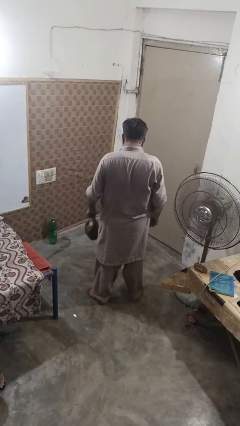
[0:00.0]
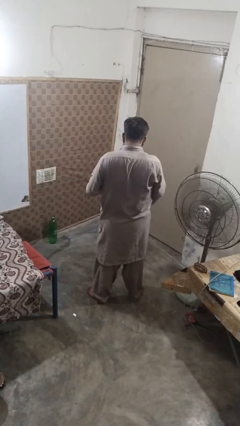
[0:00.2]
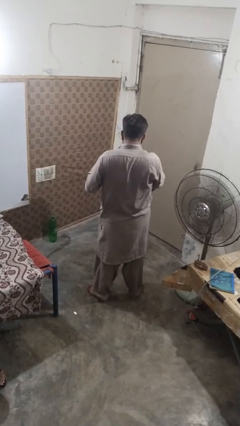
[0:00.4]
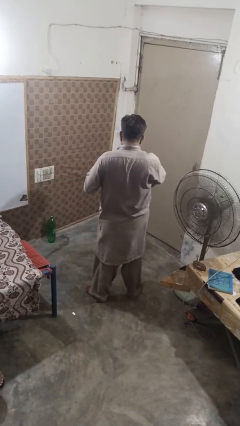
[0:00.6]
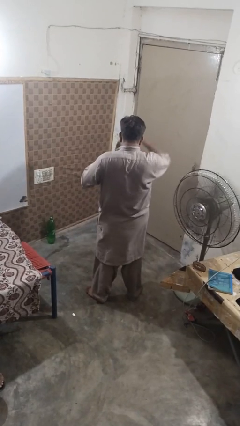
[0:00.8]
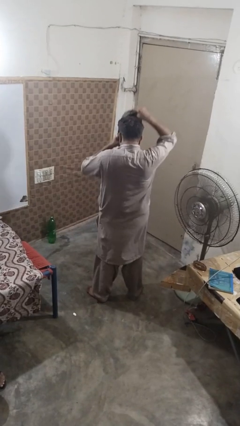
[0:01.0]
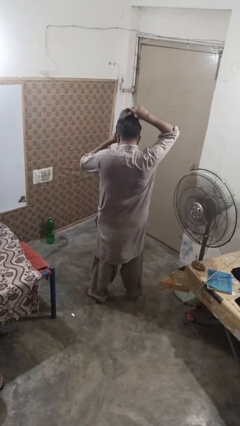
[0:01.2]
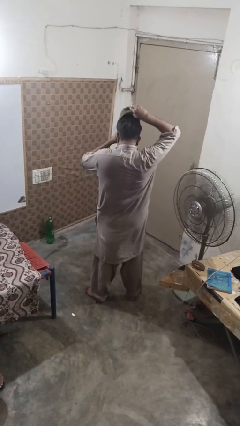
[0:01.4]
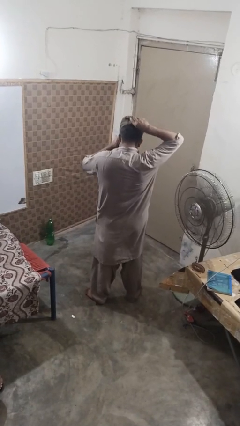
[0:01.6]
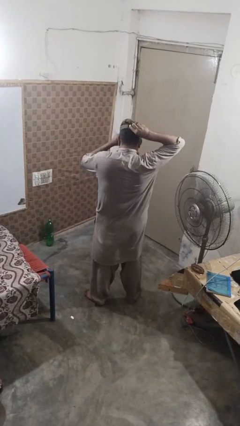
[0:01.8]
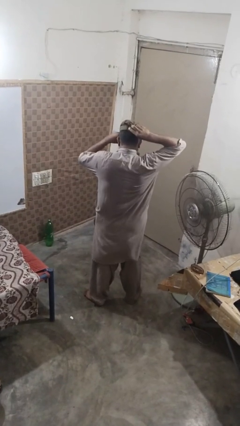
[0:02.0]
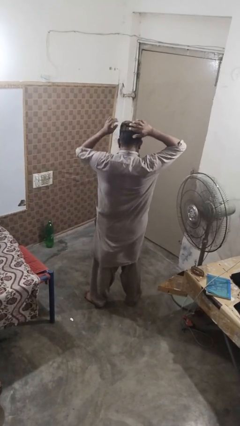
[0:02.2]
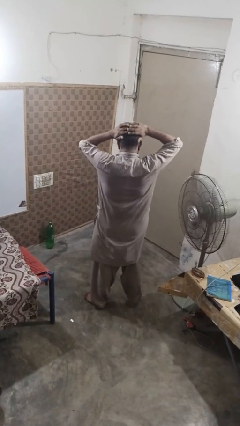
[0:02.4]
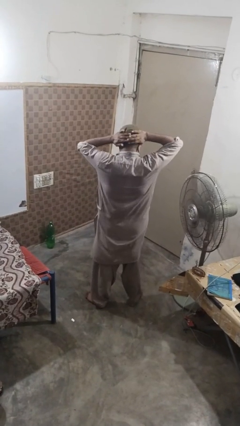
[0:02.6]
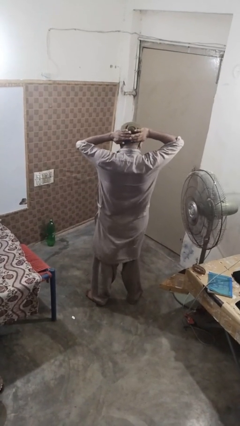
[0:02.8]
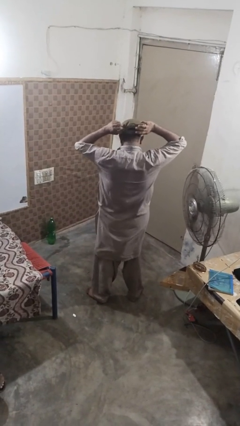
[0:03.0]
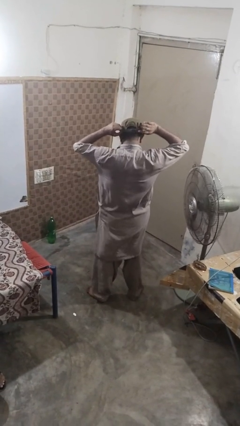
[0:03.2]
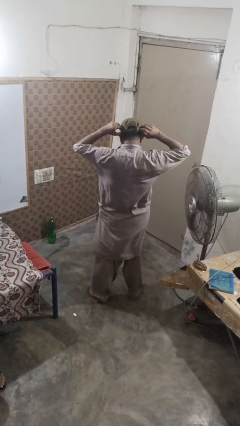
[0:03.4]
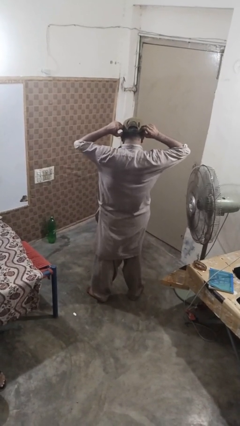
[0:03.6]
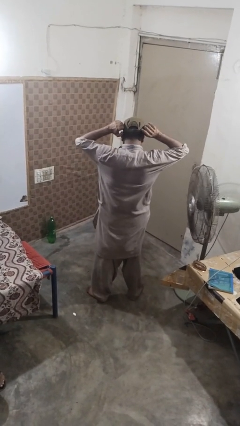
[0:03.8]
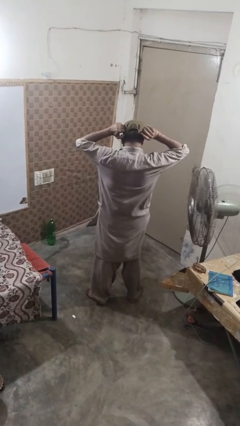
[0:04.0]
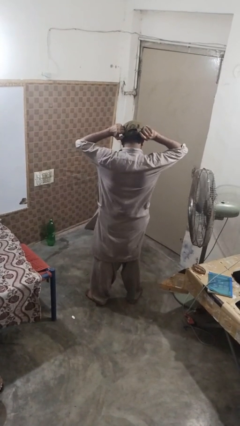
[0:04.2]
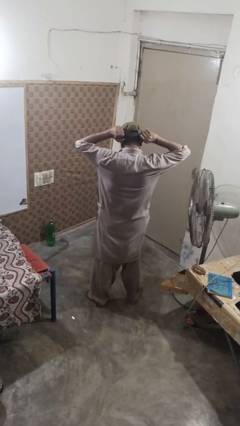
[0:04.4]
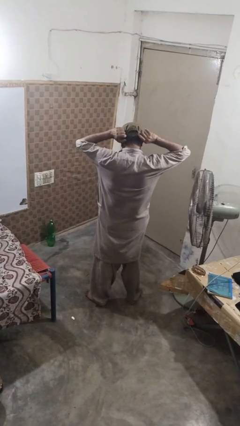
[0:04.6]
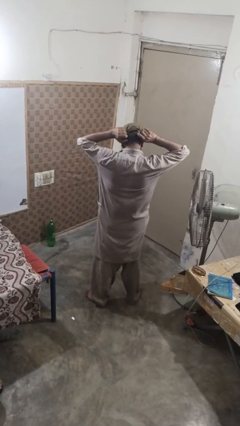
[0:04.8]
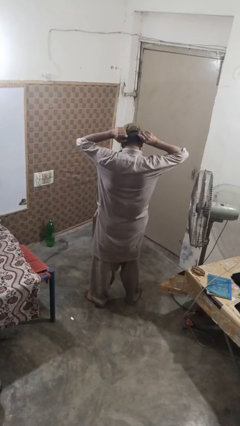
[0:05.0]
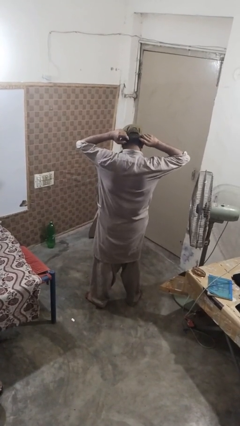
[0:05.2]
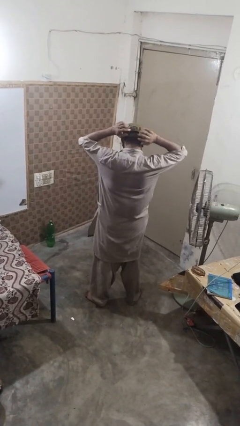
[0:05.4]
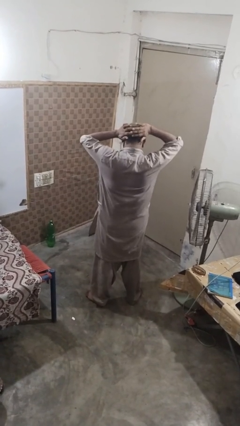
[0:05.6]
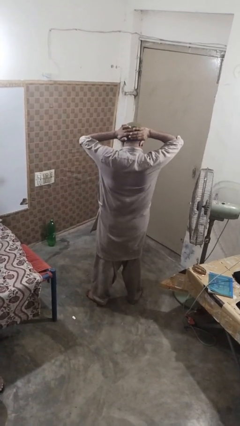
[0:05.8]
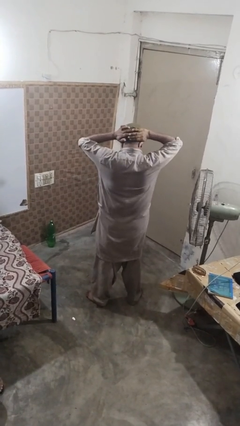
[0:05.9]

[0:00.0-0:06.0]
person puts on hat

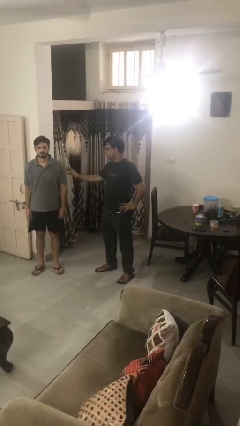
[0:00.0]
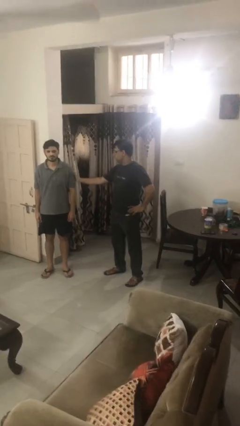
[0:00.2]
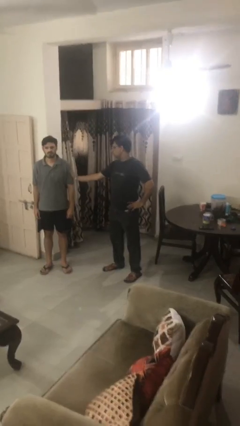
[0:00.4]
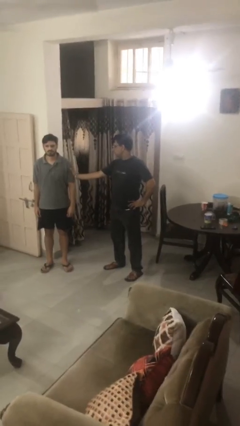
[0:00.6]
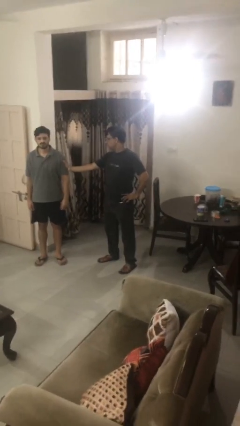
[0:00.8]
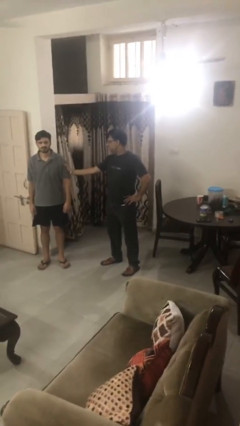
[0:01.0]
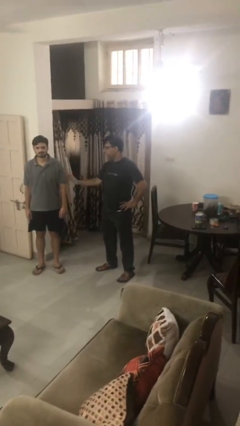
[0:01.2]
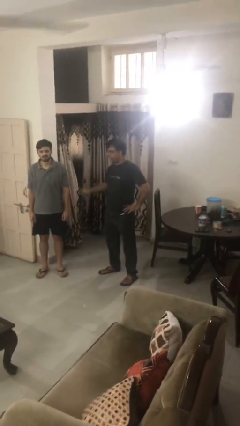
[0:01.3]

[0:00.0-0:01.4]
person grabs person by bicep

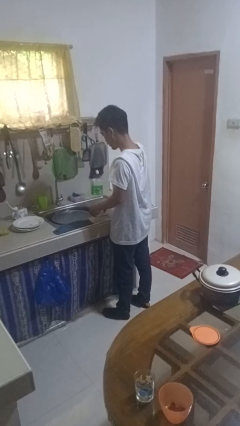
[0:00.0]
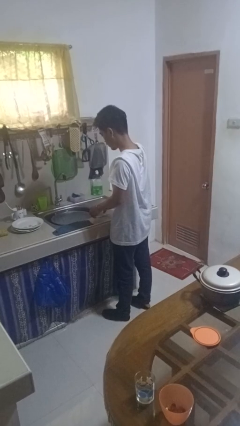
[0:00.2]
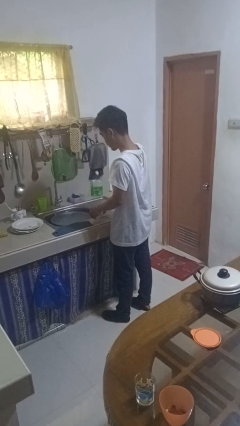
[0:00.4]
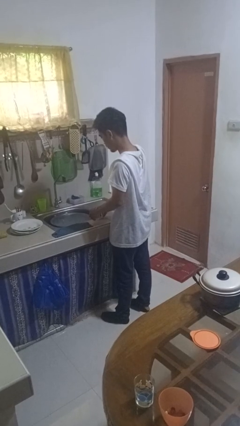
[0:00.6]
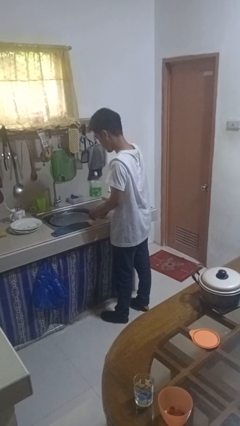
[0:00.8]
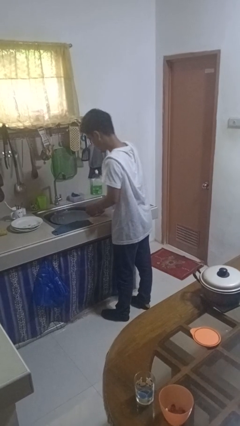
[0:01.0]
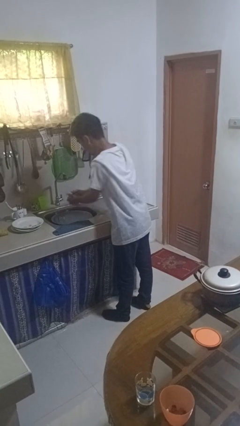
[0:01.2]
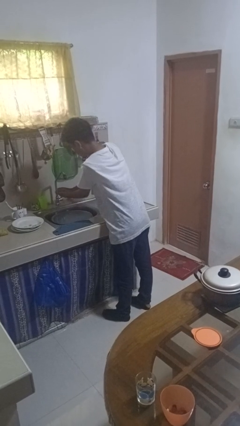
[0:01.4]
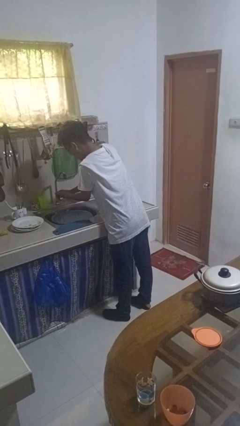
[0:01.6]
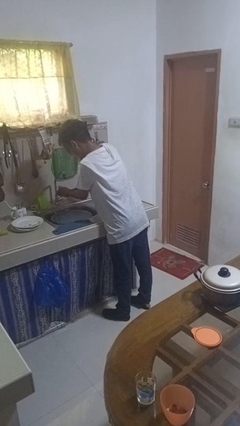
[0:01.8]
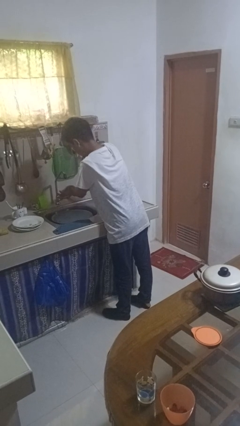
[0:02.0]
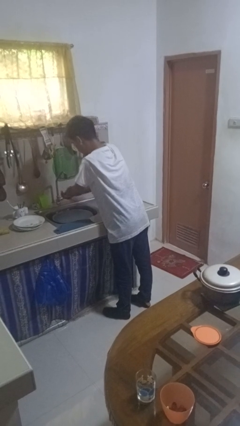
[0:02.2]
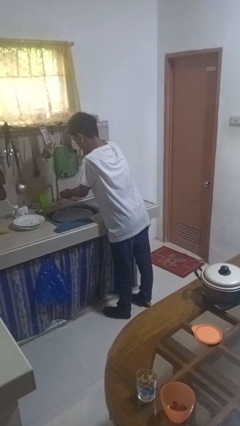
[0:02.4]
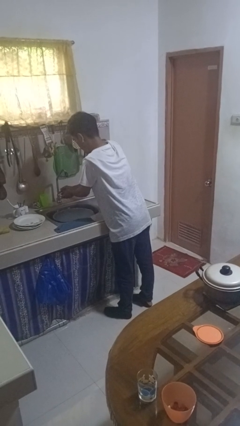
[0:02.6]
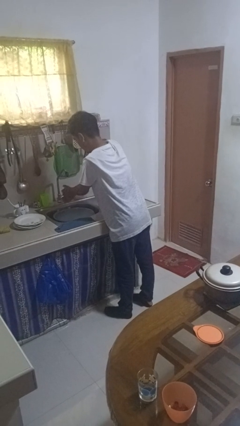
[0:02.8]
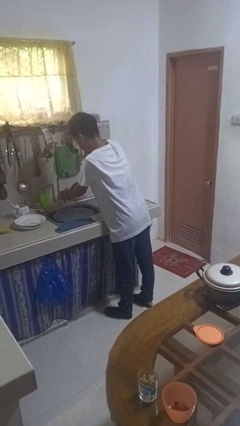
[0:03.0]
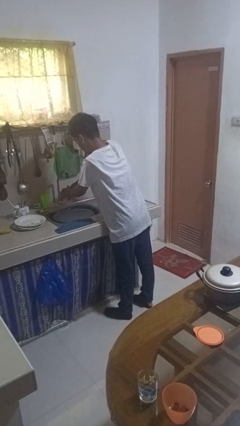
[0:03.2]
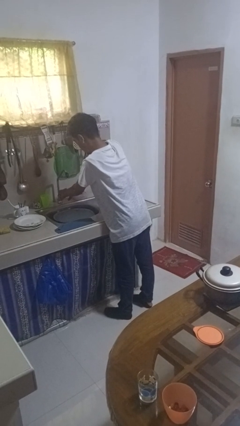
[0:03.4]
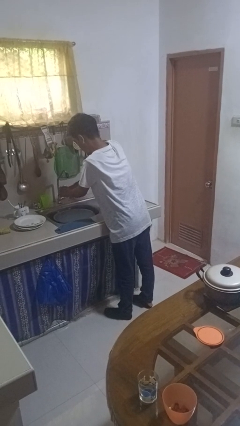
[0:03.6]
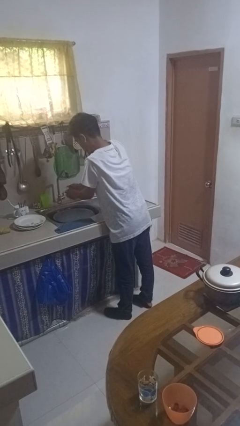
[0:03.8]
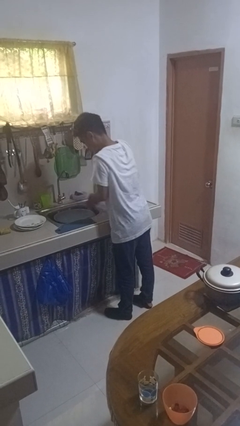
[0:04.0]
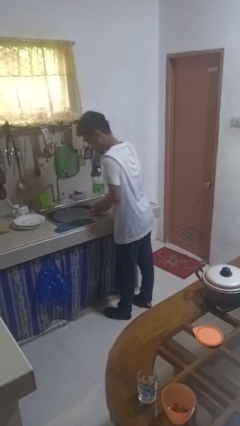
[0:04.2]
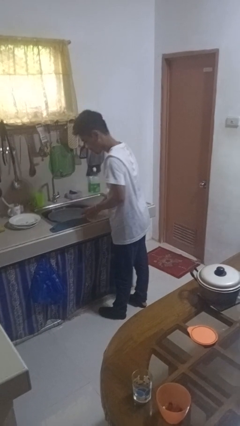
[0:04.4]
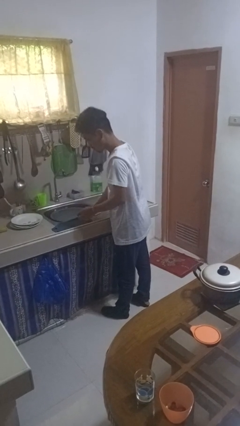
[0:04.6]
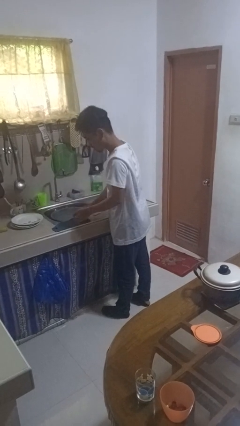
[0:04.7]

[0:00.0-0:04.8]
person washes hands

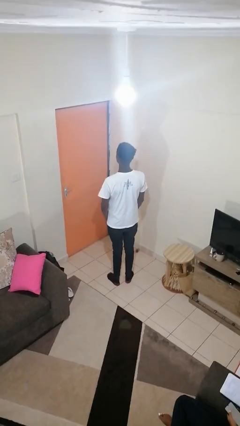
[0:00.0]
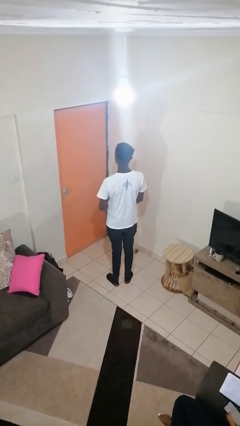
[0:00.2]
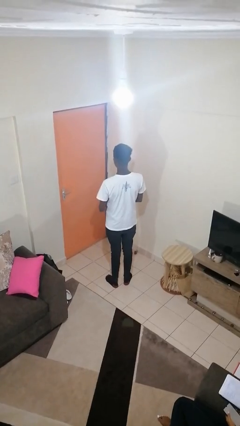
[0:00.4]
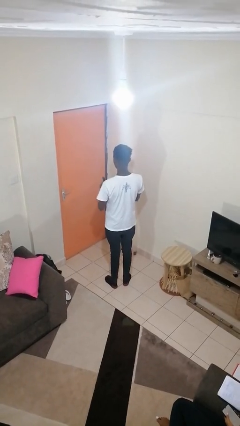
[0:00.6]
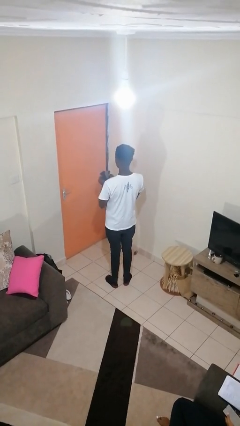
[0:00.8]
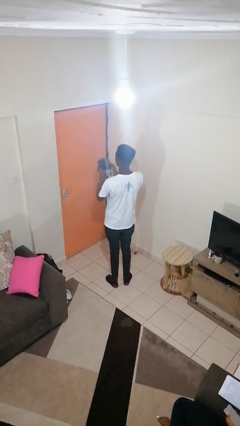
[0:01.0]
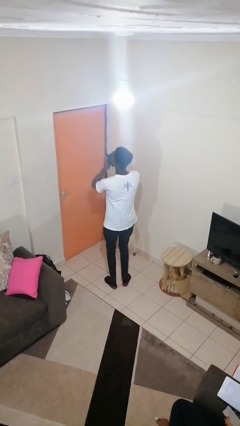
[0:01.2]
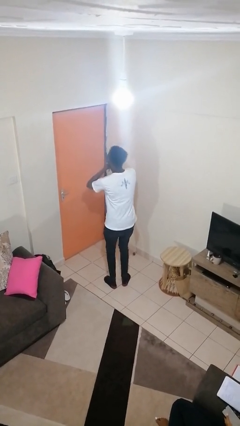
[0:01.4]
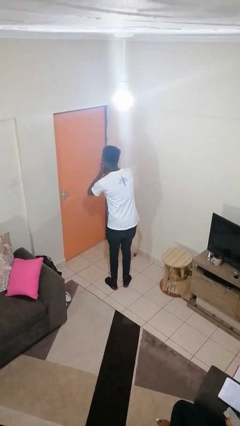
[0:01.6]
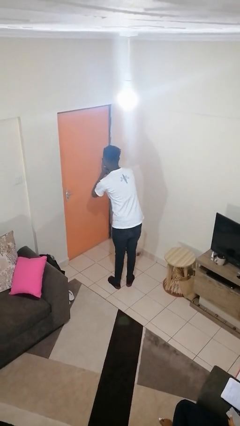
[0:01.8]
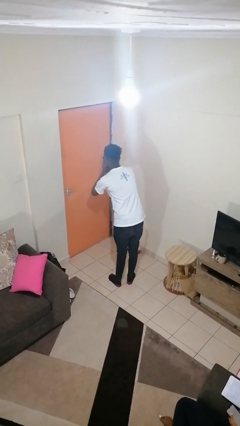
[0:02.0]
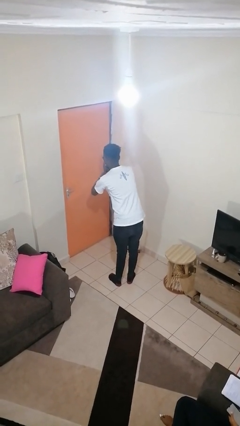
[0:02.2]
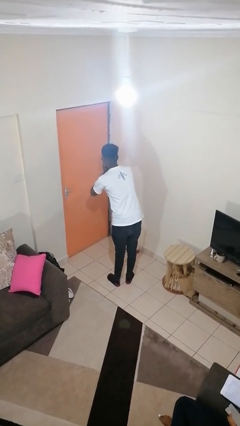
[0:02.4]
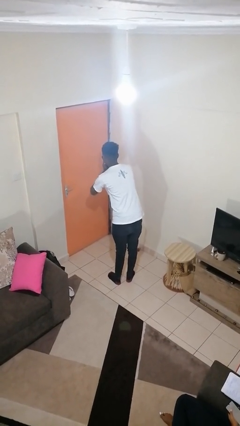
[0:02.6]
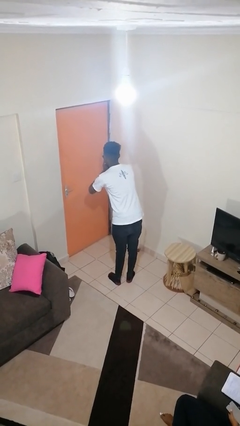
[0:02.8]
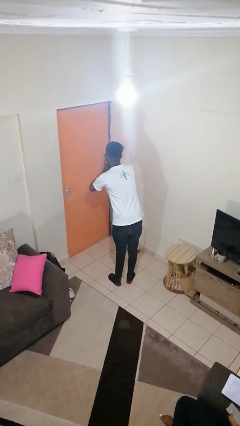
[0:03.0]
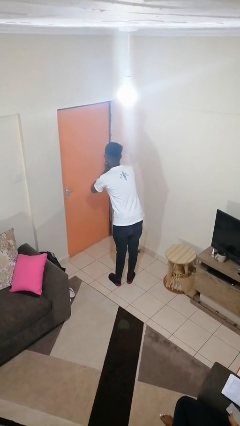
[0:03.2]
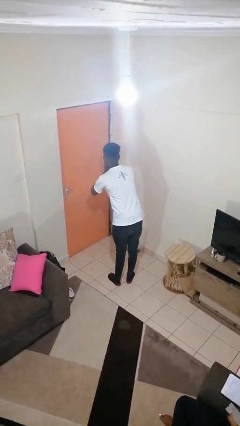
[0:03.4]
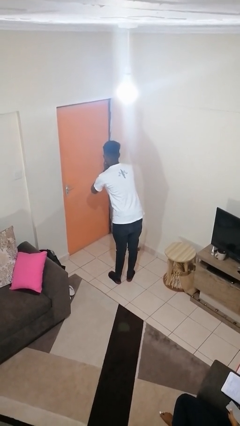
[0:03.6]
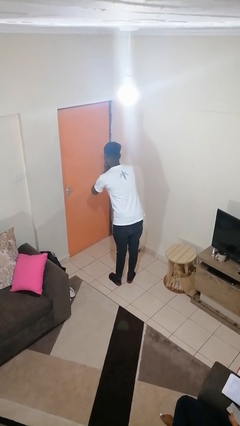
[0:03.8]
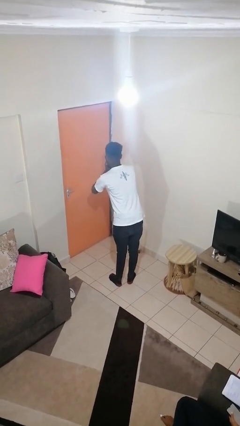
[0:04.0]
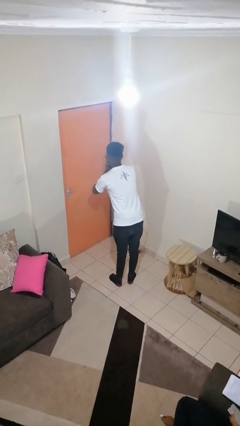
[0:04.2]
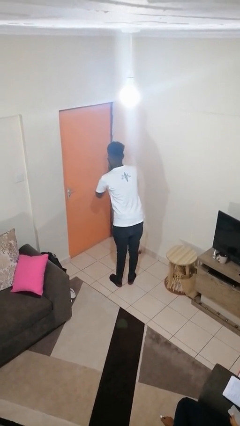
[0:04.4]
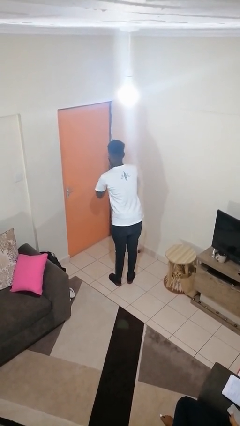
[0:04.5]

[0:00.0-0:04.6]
person blows nose

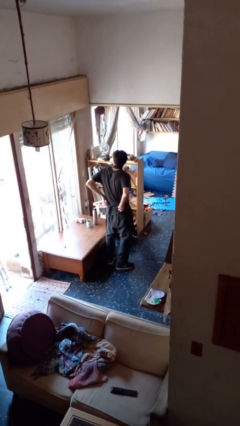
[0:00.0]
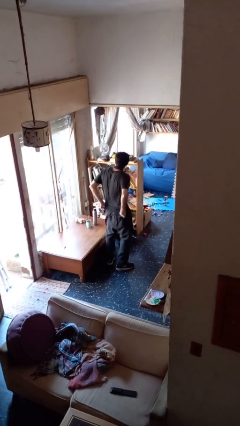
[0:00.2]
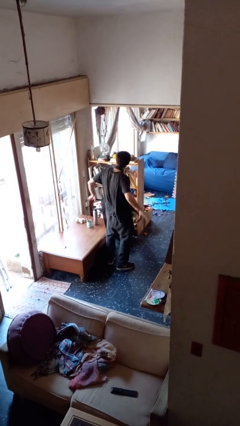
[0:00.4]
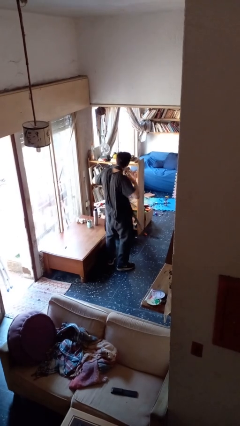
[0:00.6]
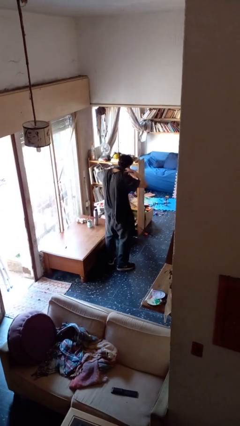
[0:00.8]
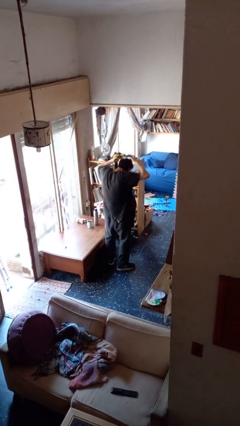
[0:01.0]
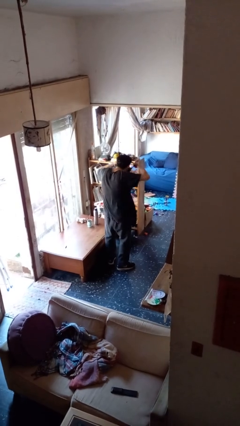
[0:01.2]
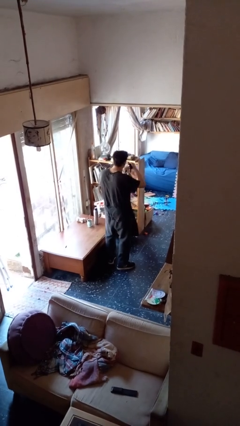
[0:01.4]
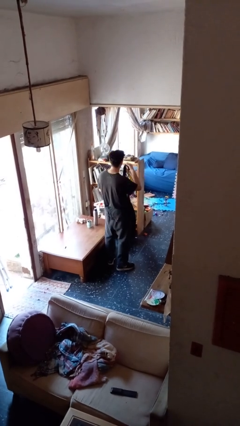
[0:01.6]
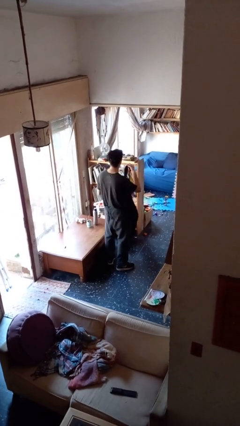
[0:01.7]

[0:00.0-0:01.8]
person takes off apron
